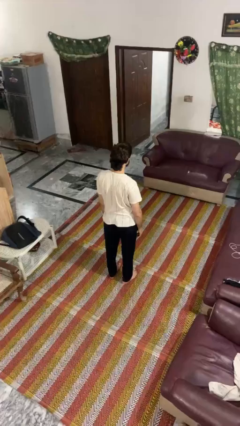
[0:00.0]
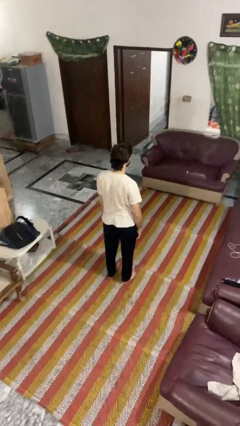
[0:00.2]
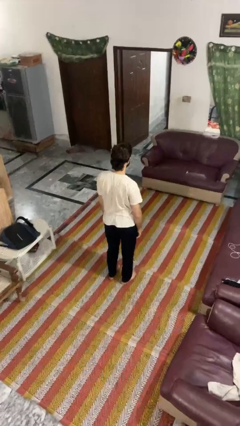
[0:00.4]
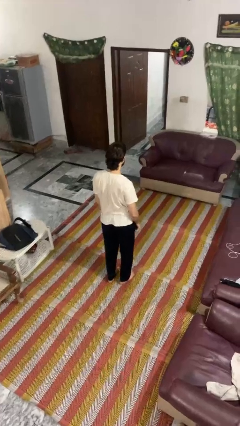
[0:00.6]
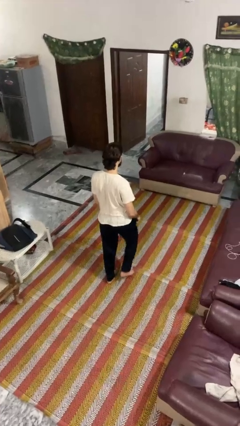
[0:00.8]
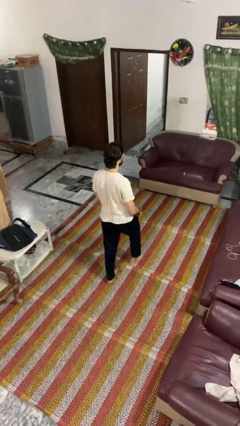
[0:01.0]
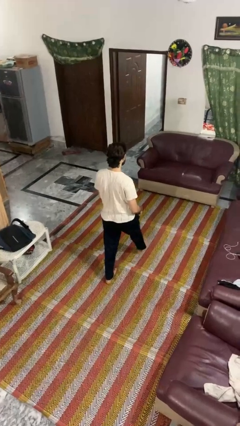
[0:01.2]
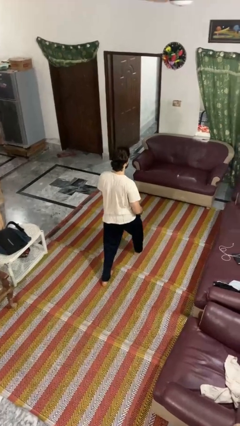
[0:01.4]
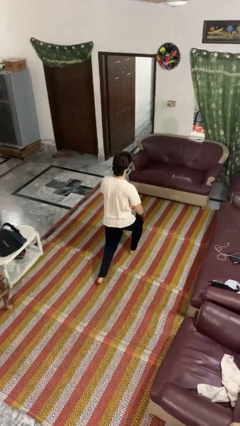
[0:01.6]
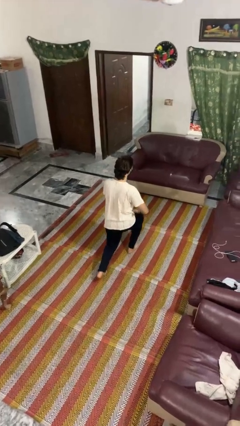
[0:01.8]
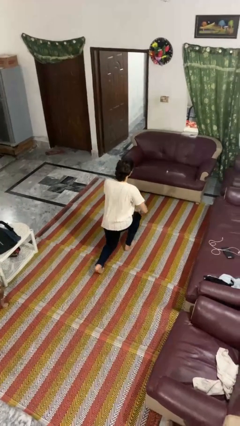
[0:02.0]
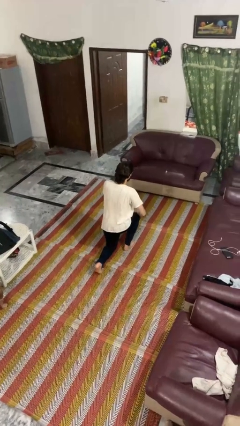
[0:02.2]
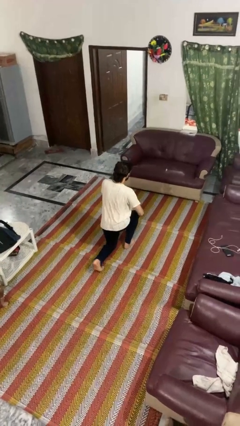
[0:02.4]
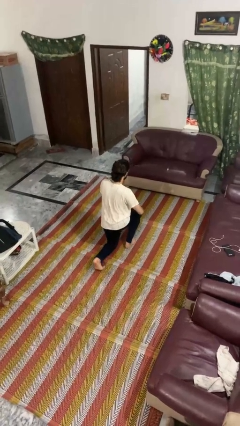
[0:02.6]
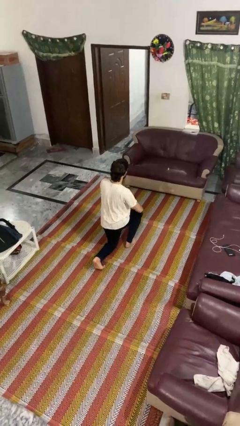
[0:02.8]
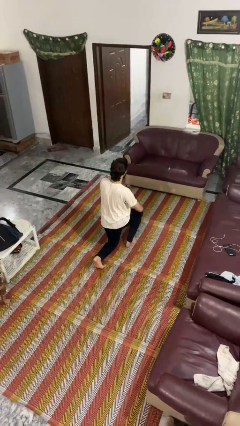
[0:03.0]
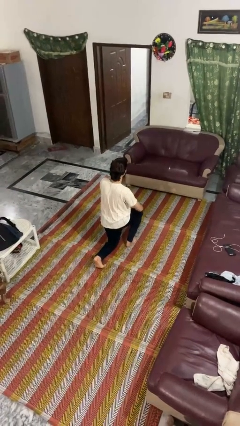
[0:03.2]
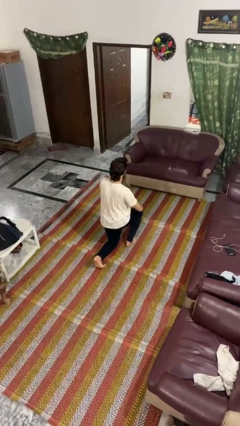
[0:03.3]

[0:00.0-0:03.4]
person kneels

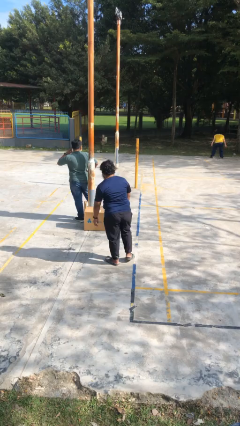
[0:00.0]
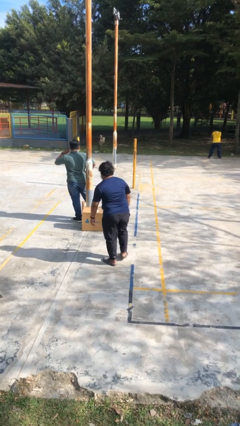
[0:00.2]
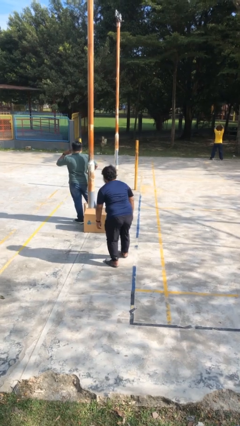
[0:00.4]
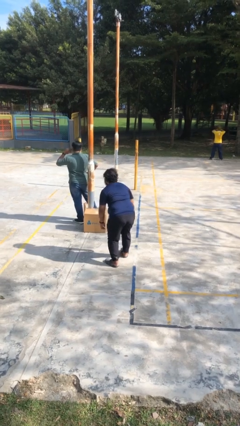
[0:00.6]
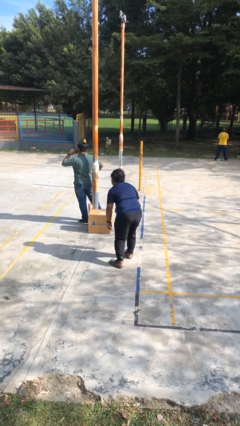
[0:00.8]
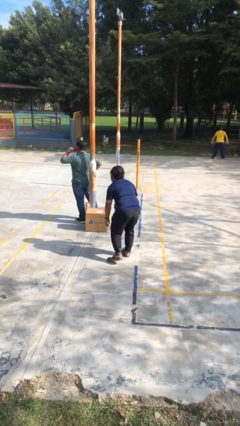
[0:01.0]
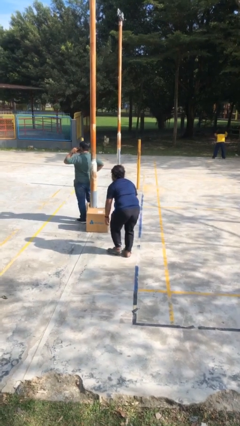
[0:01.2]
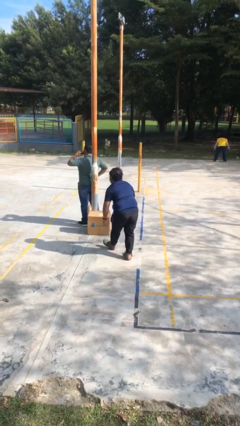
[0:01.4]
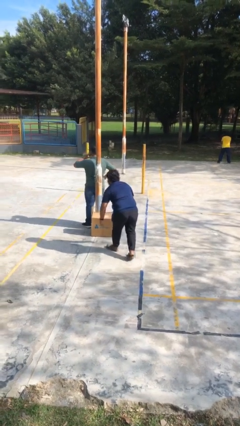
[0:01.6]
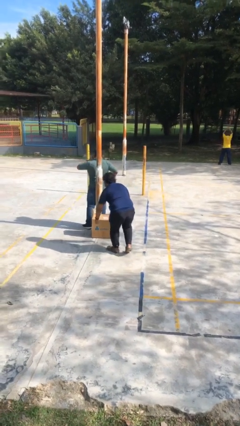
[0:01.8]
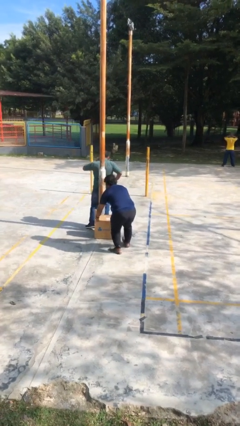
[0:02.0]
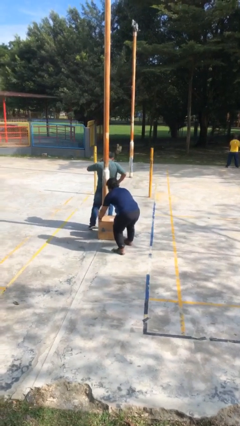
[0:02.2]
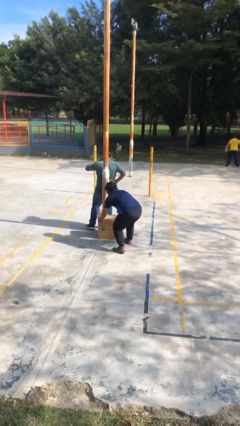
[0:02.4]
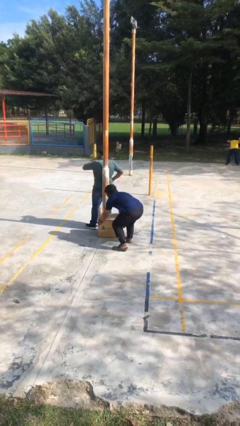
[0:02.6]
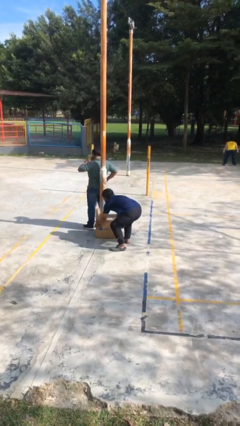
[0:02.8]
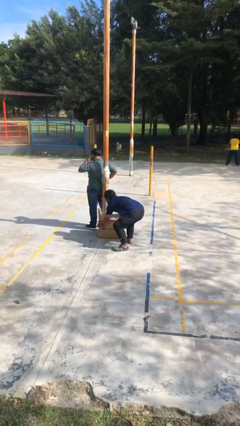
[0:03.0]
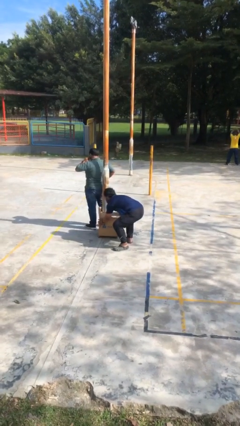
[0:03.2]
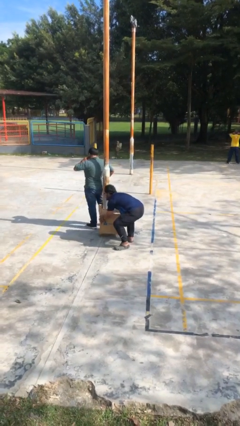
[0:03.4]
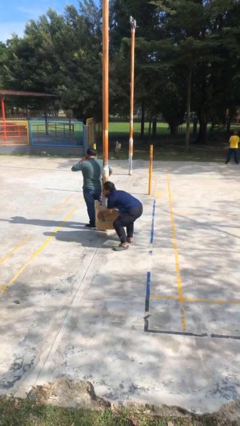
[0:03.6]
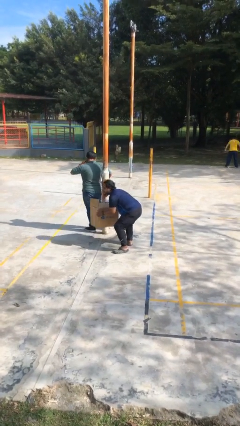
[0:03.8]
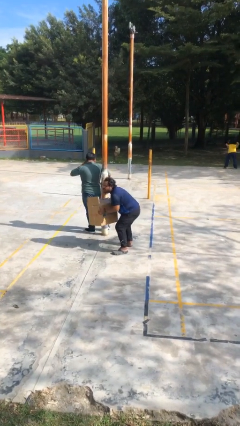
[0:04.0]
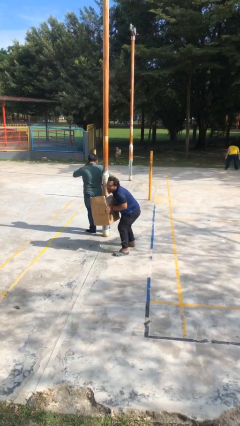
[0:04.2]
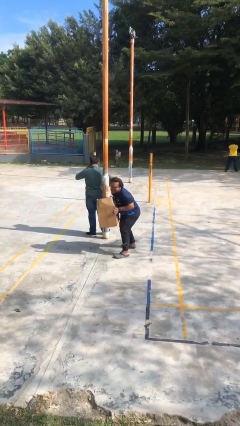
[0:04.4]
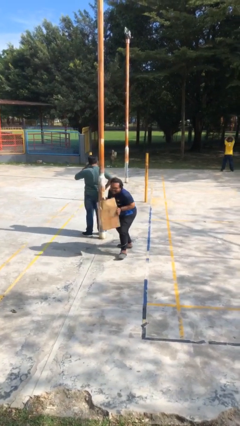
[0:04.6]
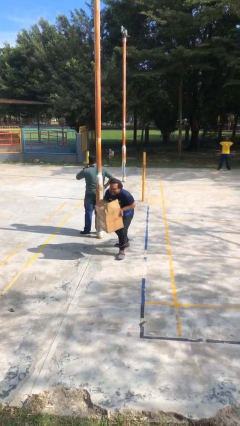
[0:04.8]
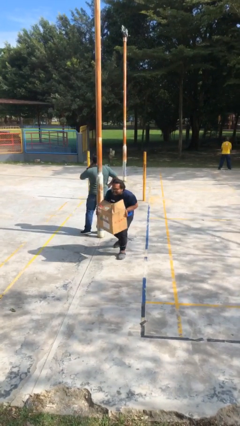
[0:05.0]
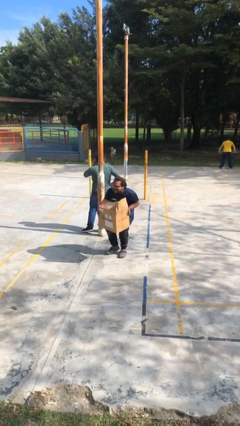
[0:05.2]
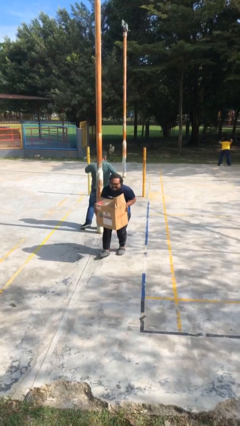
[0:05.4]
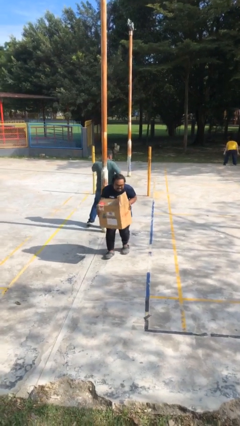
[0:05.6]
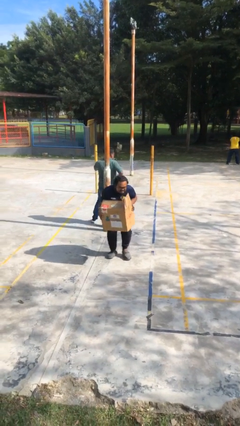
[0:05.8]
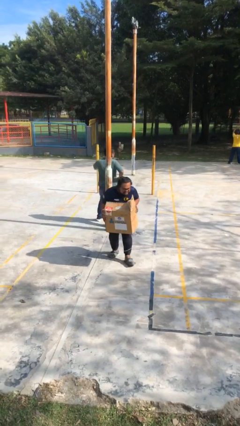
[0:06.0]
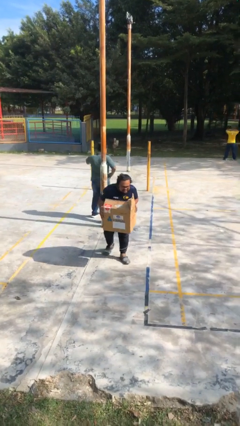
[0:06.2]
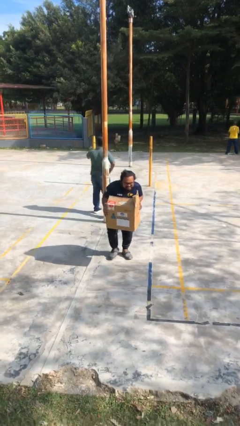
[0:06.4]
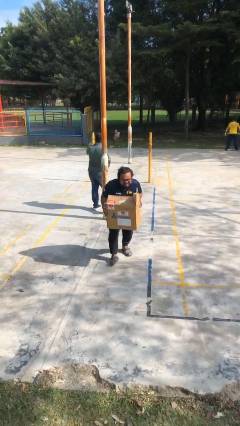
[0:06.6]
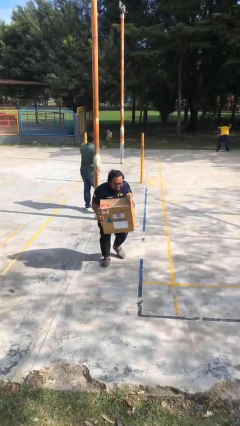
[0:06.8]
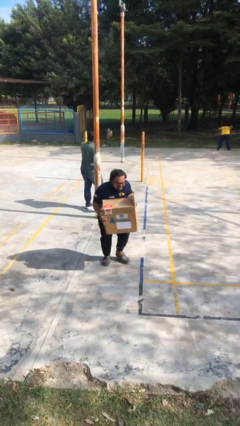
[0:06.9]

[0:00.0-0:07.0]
person steals object from person

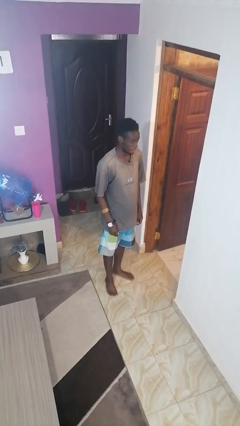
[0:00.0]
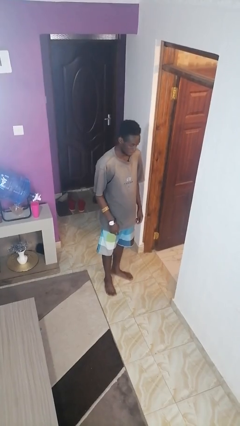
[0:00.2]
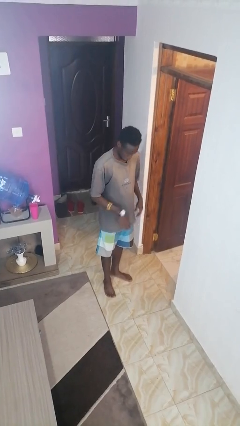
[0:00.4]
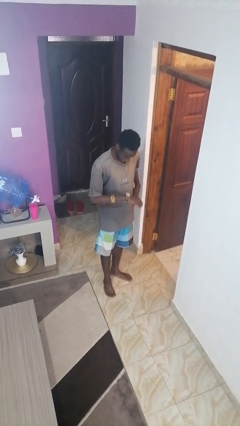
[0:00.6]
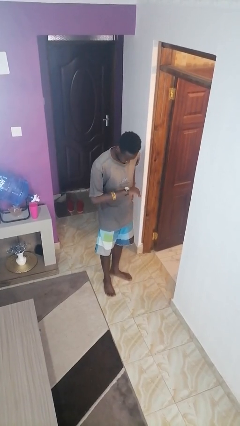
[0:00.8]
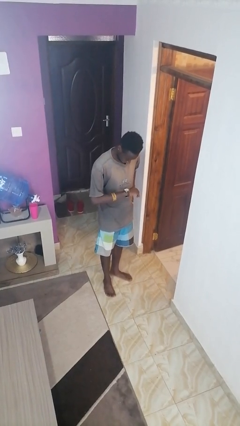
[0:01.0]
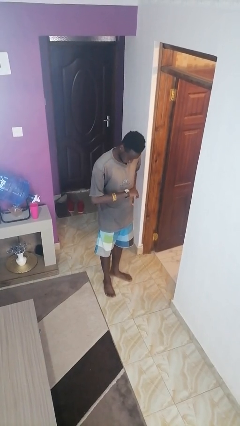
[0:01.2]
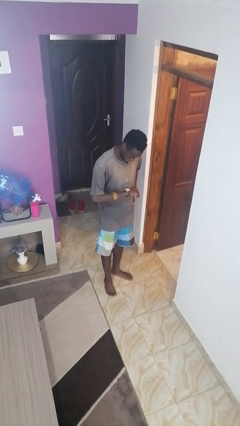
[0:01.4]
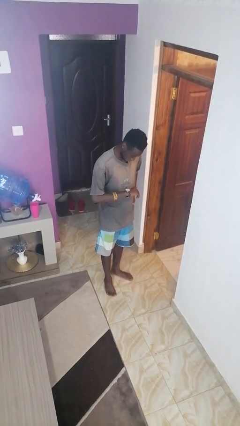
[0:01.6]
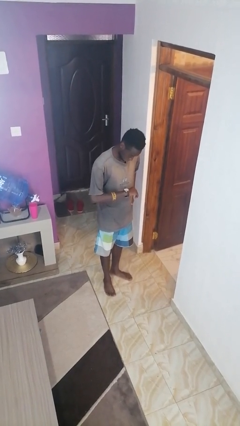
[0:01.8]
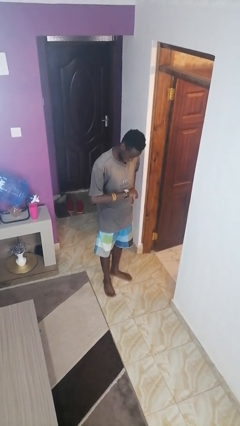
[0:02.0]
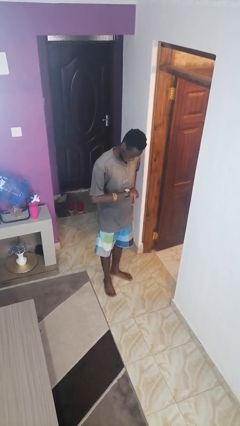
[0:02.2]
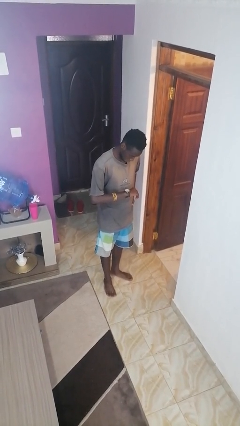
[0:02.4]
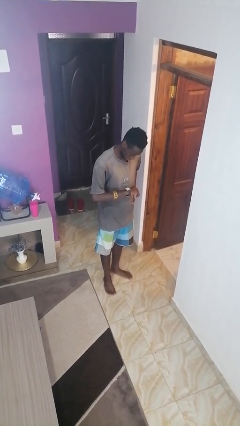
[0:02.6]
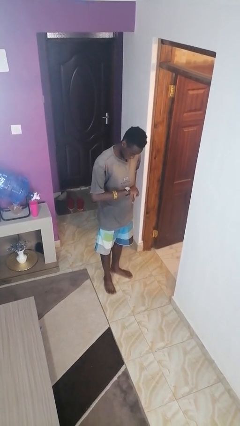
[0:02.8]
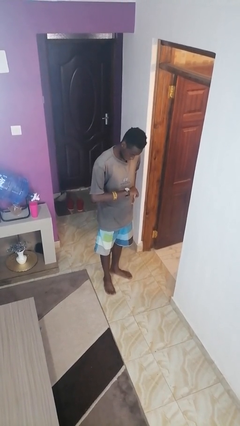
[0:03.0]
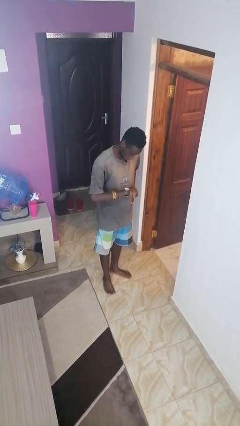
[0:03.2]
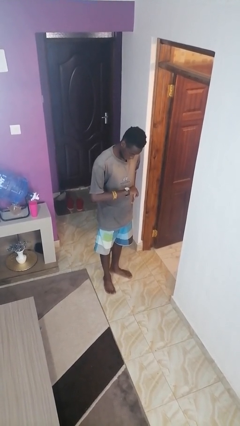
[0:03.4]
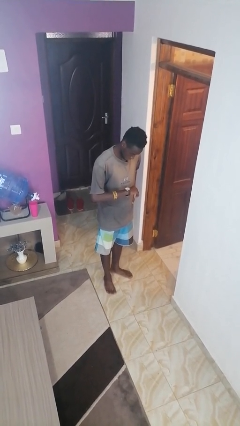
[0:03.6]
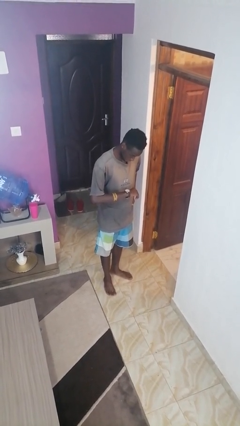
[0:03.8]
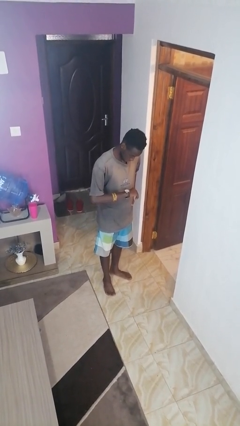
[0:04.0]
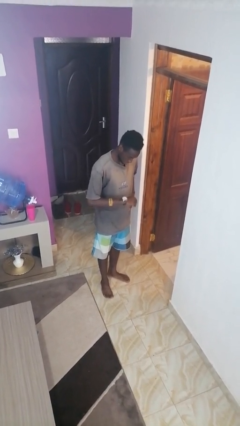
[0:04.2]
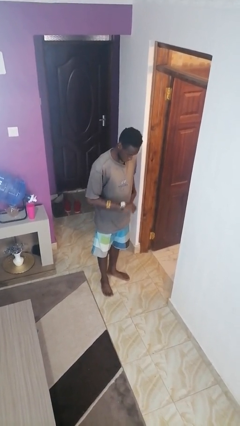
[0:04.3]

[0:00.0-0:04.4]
person looks at wristwatch

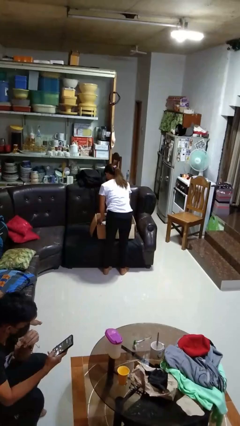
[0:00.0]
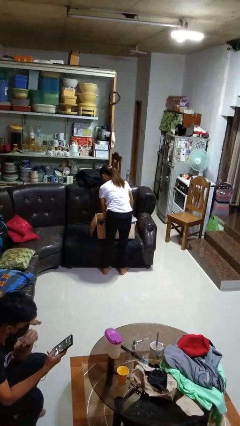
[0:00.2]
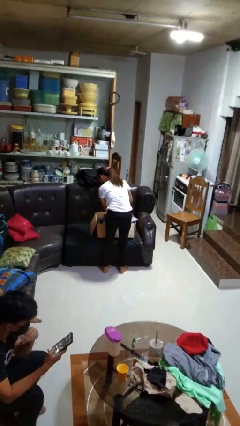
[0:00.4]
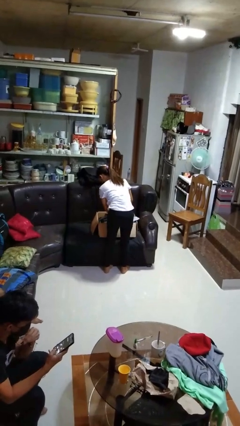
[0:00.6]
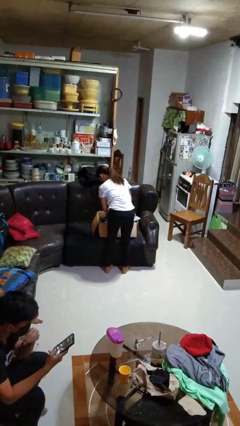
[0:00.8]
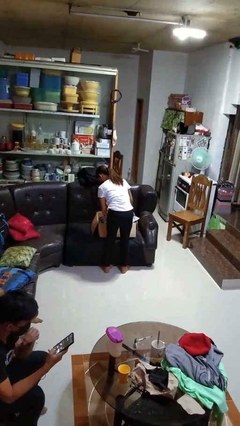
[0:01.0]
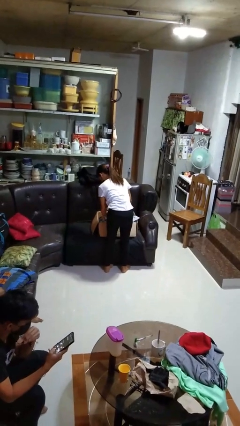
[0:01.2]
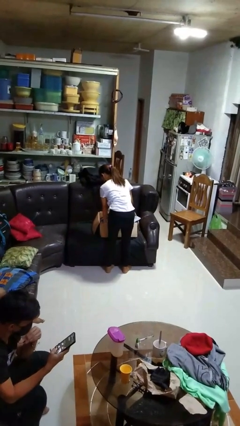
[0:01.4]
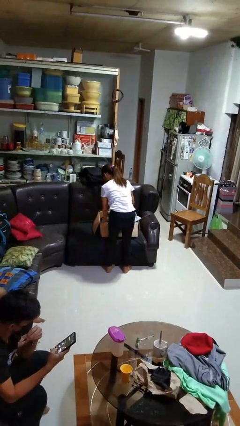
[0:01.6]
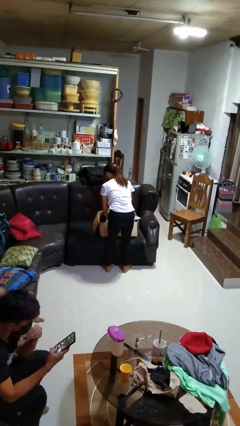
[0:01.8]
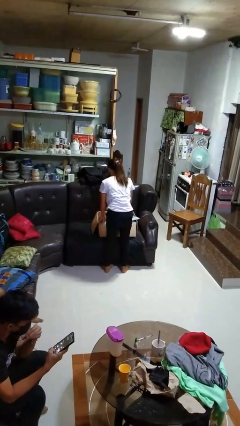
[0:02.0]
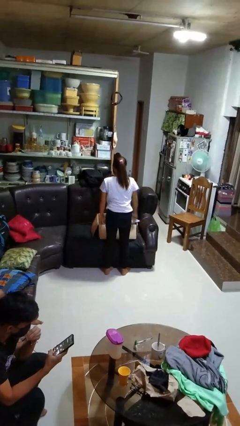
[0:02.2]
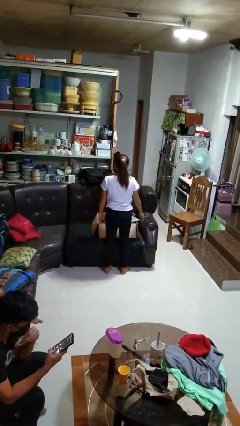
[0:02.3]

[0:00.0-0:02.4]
person searches in box

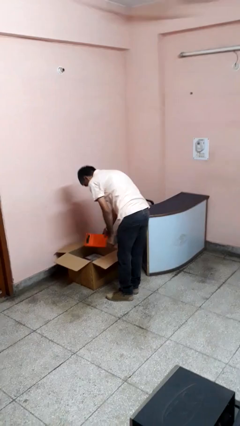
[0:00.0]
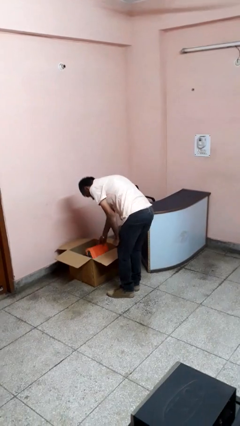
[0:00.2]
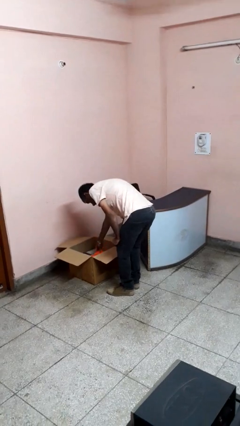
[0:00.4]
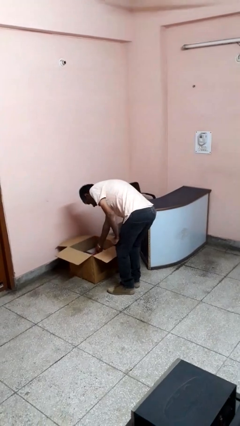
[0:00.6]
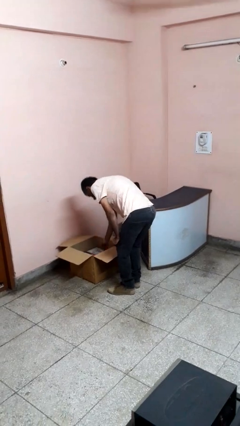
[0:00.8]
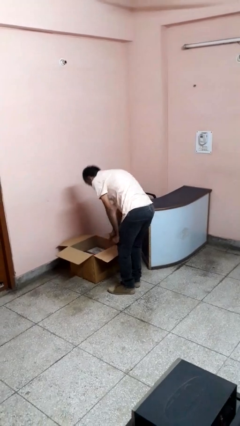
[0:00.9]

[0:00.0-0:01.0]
person puts object into box
